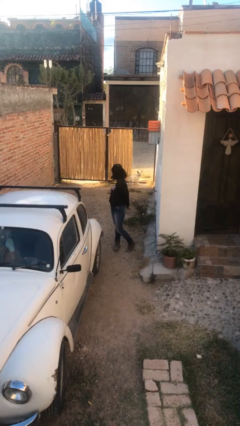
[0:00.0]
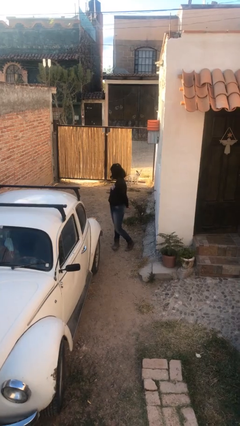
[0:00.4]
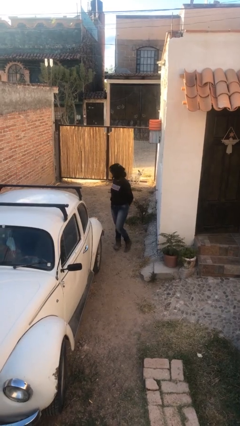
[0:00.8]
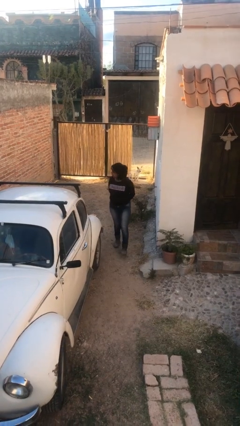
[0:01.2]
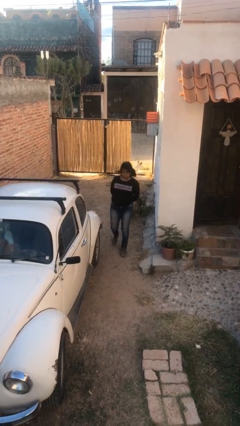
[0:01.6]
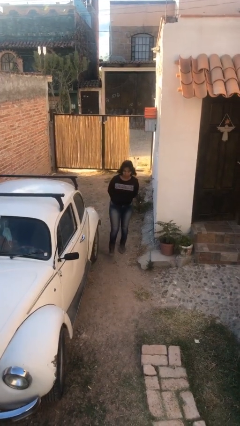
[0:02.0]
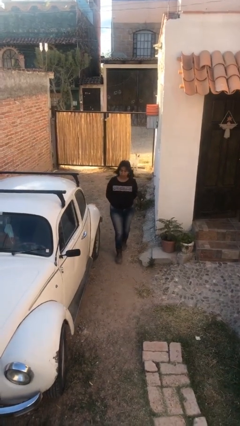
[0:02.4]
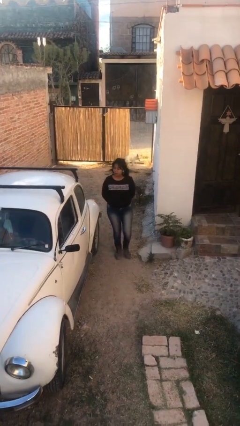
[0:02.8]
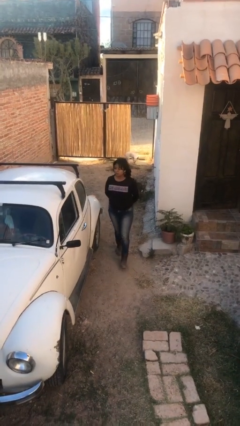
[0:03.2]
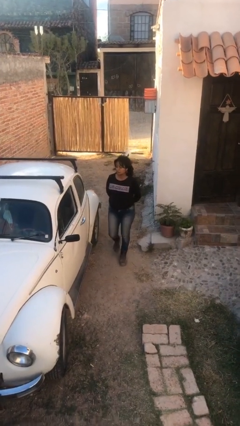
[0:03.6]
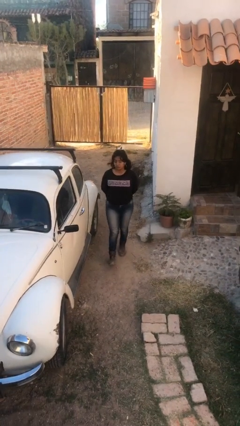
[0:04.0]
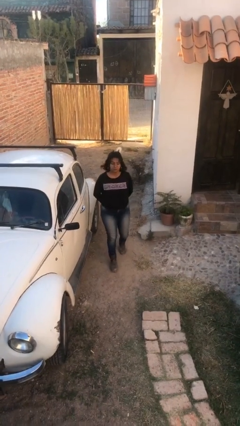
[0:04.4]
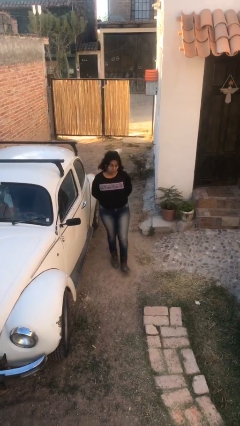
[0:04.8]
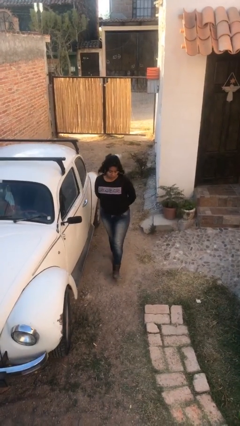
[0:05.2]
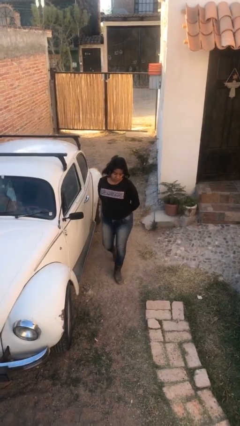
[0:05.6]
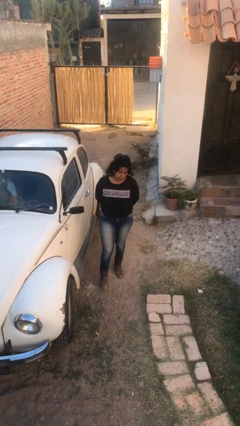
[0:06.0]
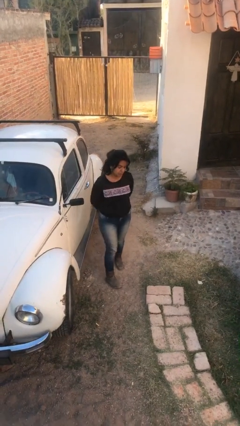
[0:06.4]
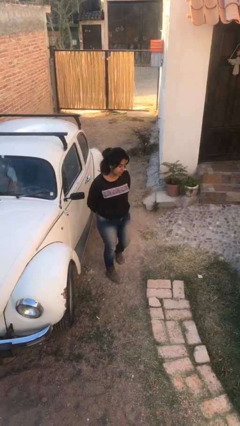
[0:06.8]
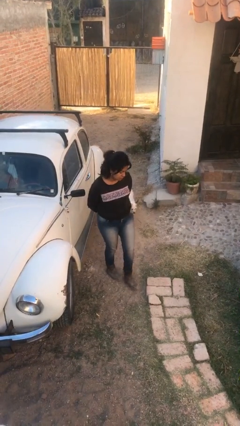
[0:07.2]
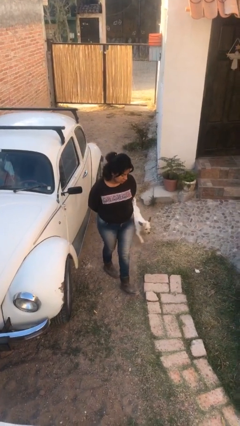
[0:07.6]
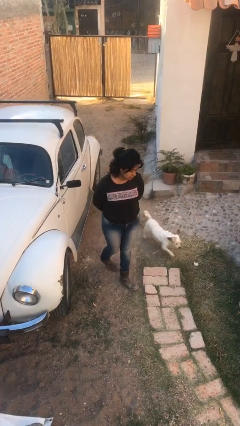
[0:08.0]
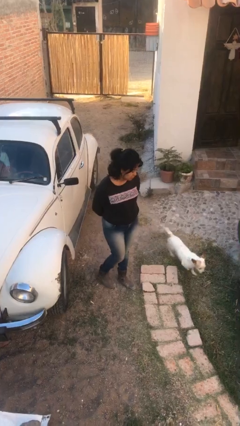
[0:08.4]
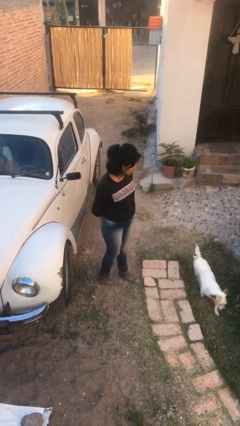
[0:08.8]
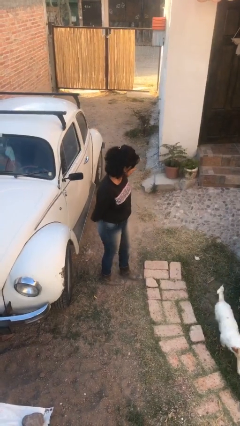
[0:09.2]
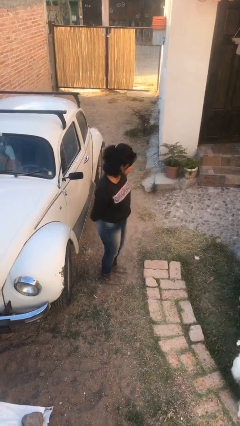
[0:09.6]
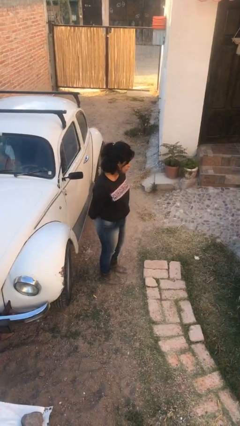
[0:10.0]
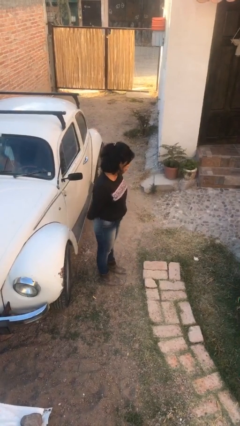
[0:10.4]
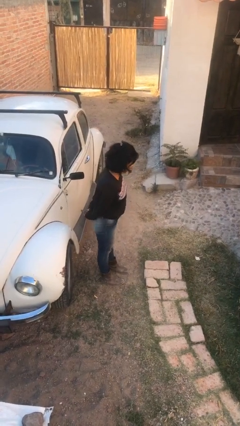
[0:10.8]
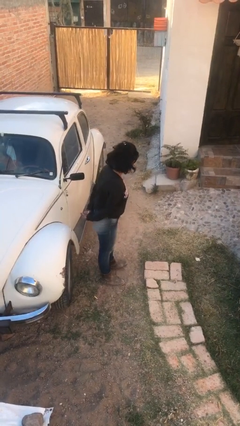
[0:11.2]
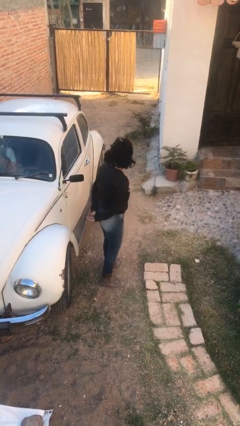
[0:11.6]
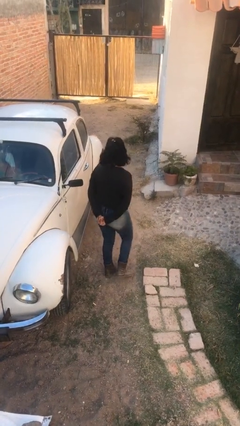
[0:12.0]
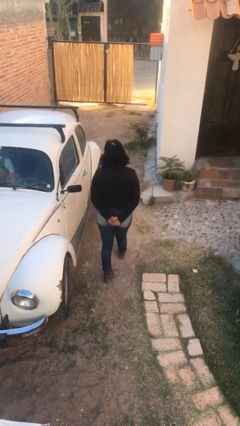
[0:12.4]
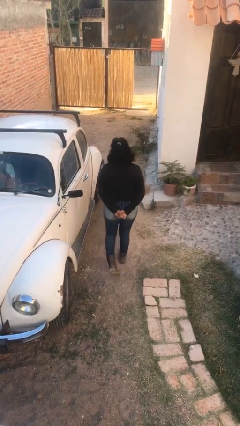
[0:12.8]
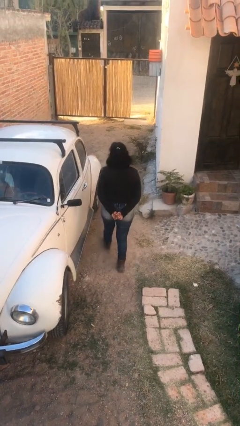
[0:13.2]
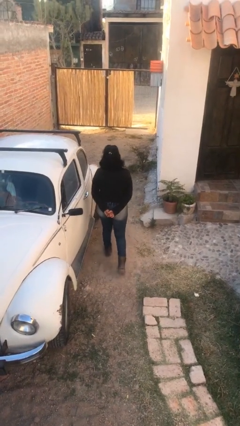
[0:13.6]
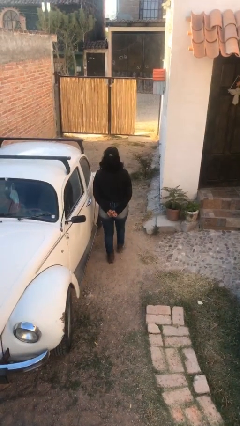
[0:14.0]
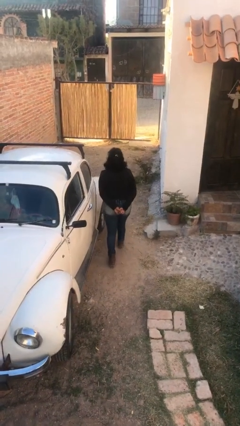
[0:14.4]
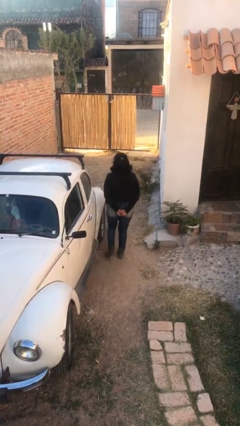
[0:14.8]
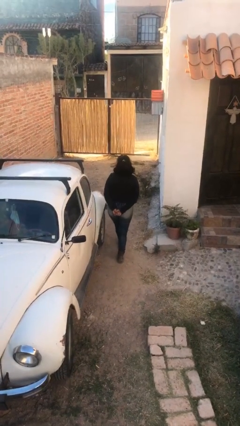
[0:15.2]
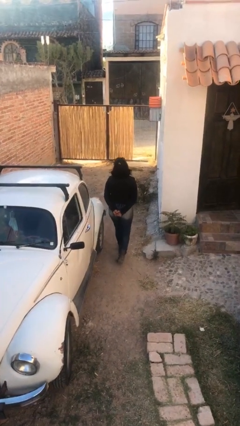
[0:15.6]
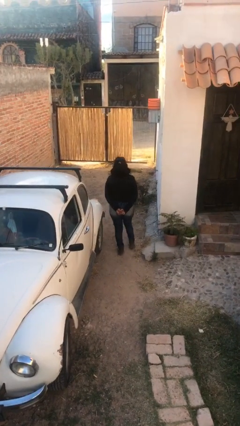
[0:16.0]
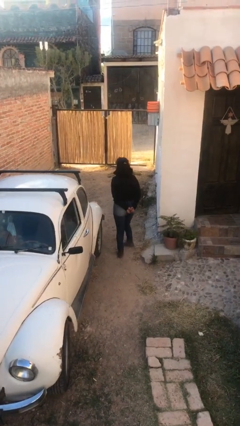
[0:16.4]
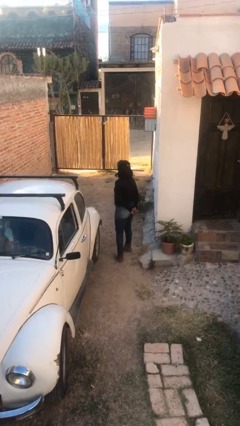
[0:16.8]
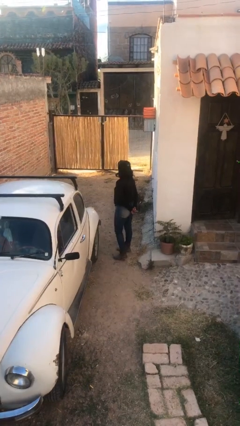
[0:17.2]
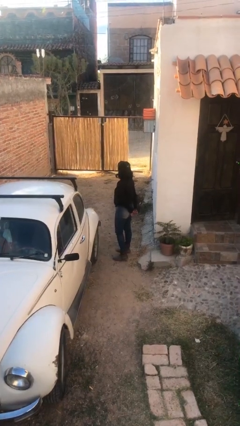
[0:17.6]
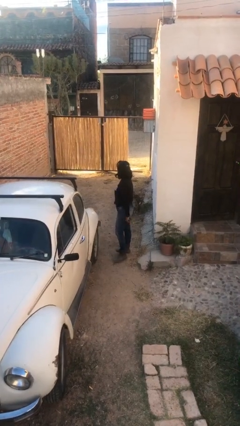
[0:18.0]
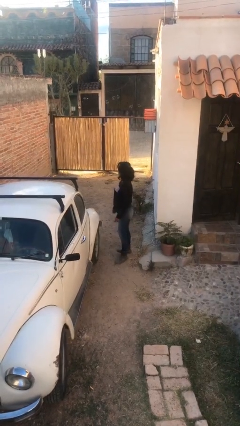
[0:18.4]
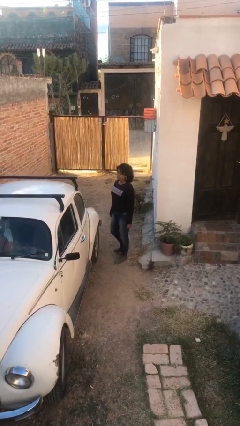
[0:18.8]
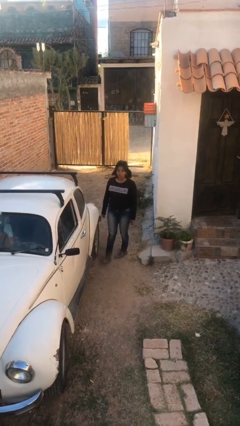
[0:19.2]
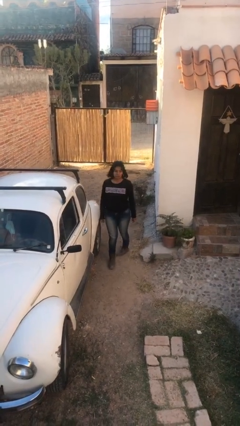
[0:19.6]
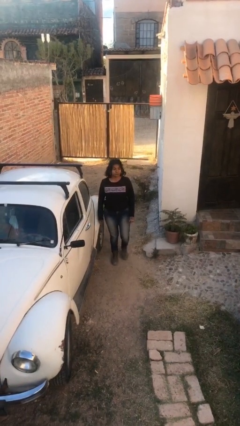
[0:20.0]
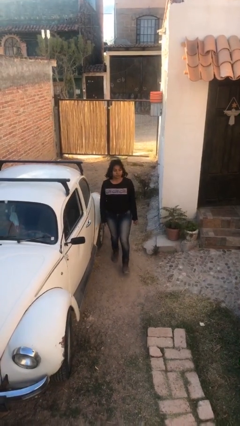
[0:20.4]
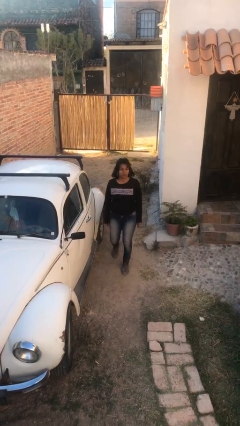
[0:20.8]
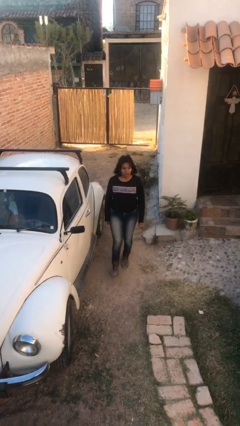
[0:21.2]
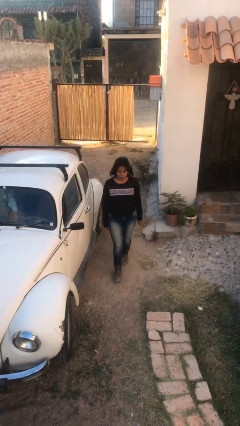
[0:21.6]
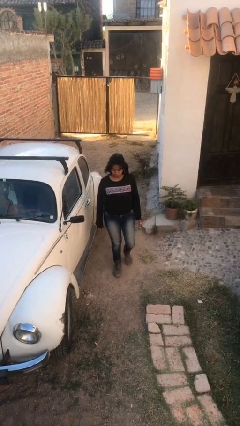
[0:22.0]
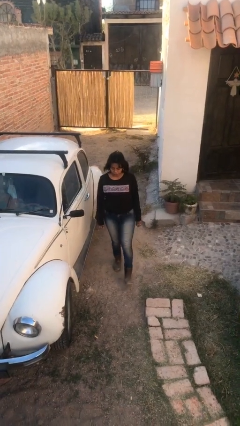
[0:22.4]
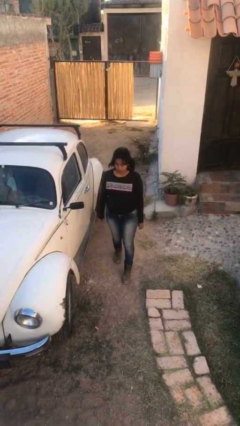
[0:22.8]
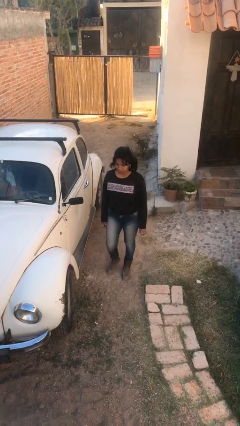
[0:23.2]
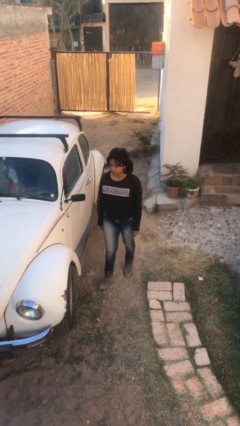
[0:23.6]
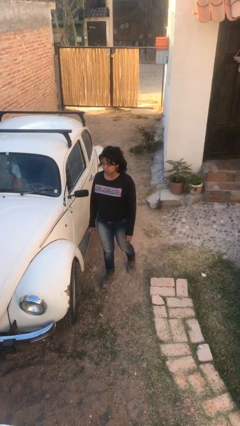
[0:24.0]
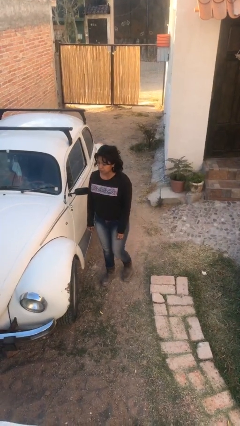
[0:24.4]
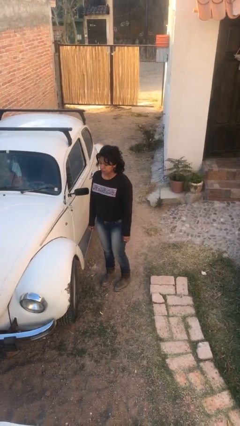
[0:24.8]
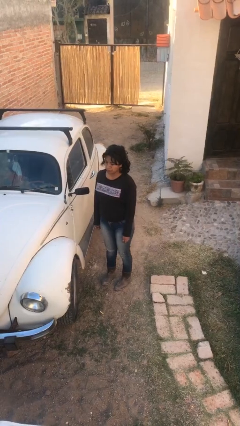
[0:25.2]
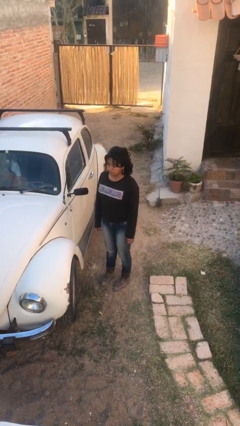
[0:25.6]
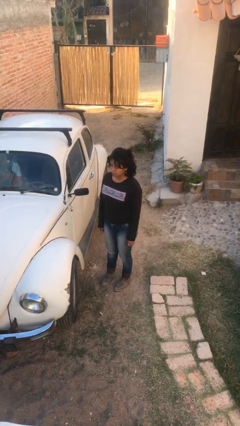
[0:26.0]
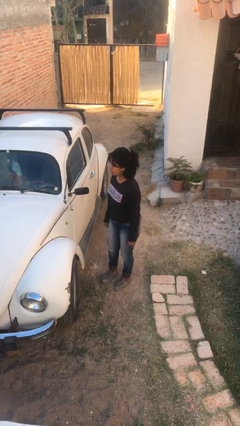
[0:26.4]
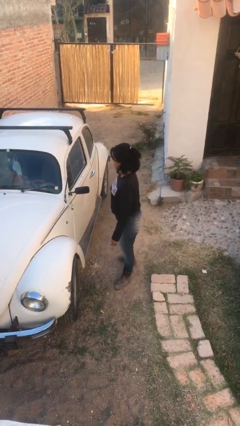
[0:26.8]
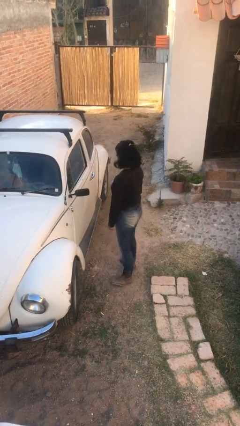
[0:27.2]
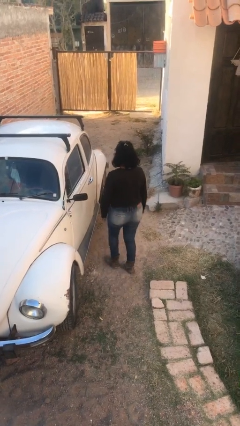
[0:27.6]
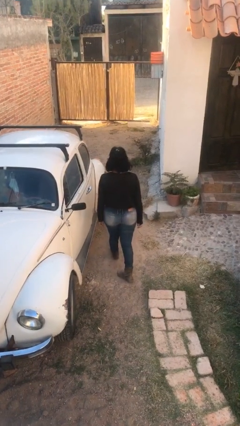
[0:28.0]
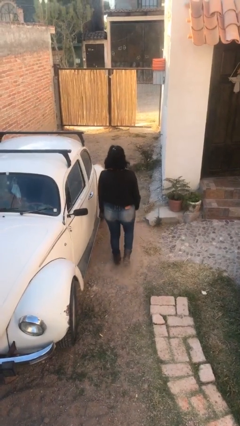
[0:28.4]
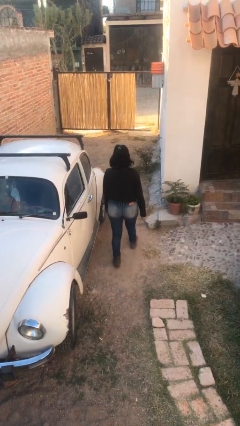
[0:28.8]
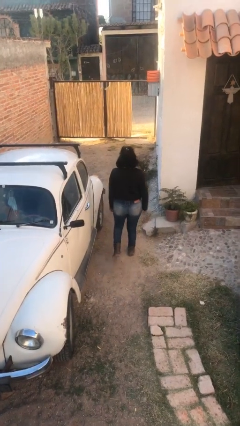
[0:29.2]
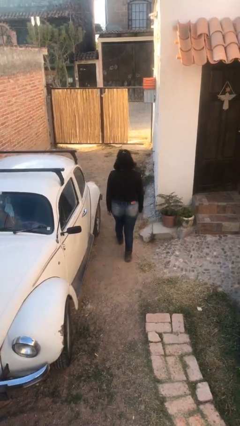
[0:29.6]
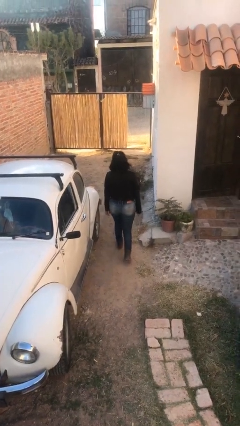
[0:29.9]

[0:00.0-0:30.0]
person walks

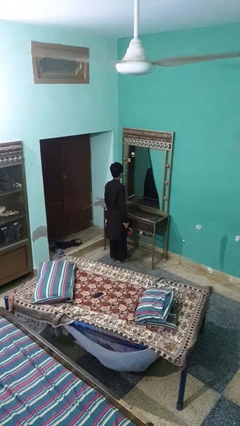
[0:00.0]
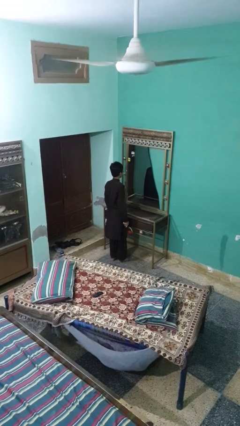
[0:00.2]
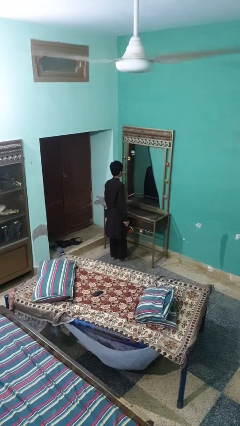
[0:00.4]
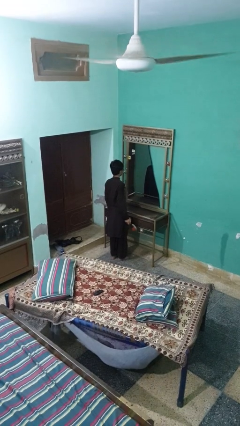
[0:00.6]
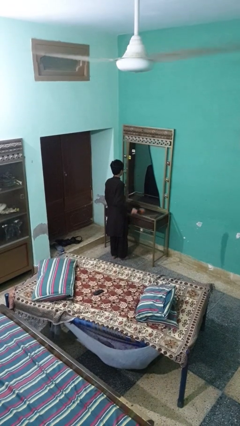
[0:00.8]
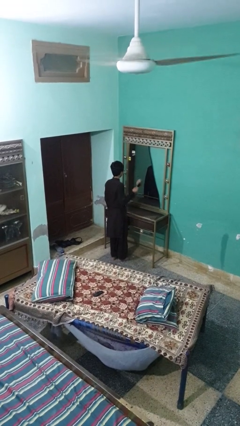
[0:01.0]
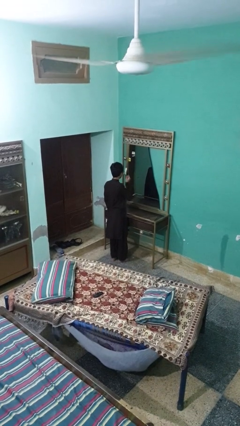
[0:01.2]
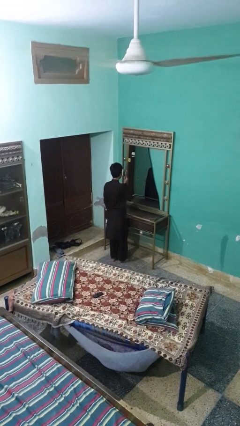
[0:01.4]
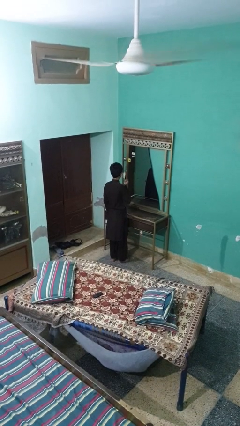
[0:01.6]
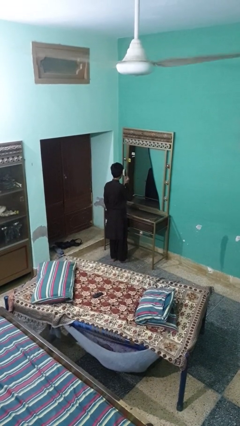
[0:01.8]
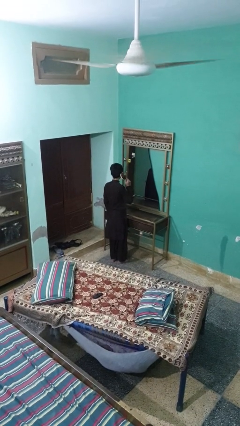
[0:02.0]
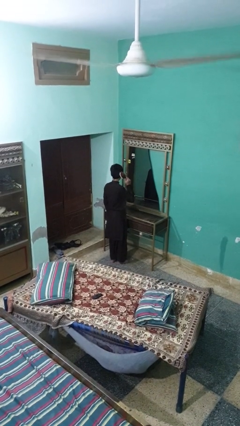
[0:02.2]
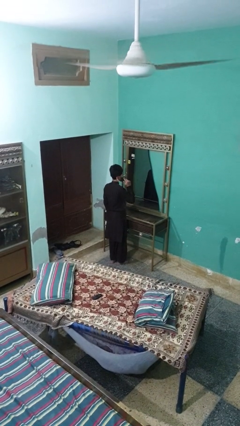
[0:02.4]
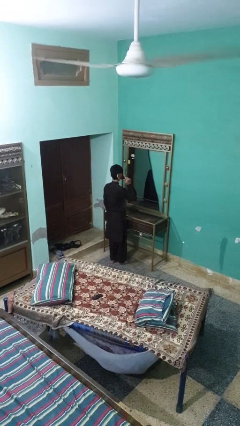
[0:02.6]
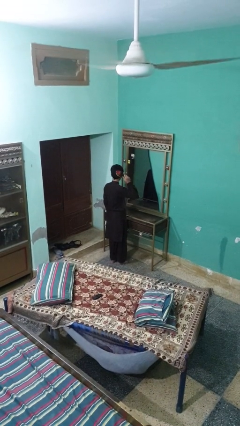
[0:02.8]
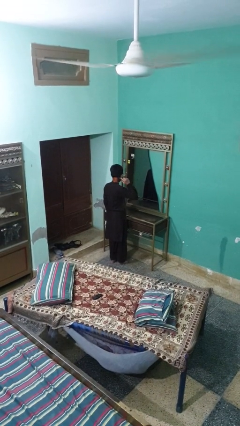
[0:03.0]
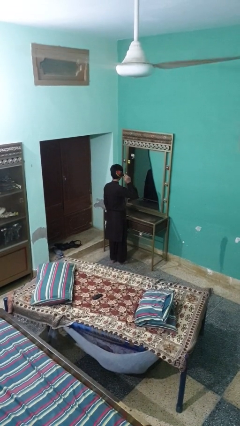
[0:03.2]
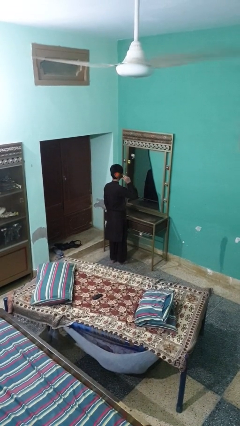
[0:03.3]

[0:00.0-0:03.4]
person brushes hair
